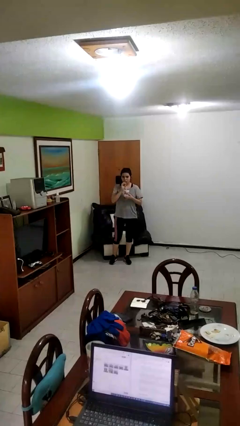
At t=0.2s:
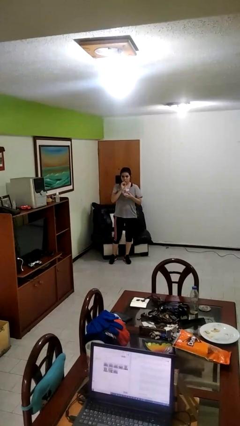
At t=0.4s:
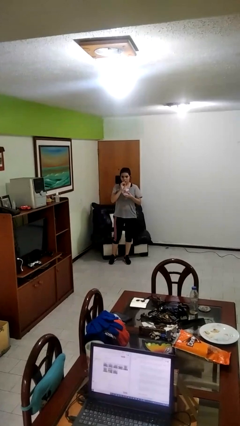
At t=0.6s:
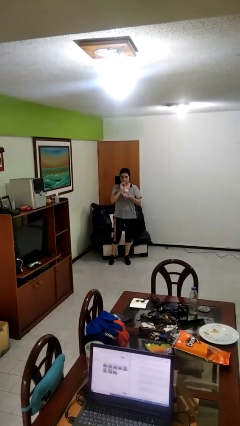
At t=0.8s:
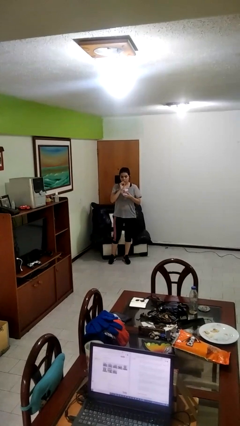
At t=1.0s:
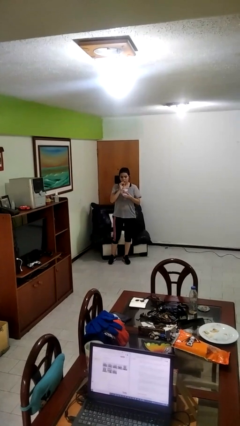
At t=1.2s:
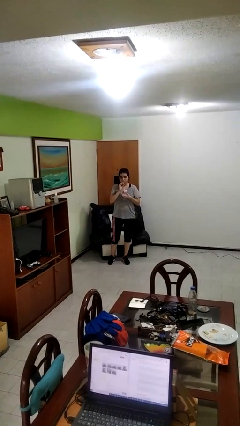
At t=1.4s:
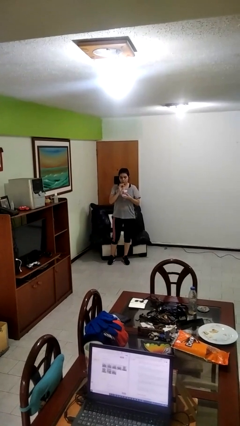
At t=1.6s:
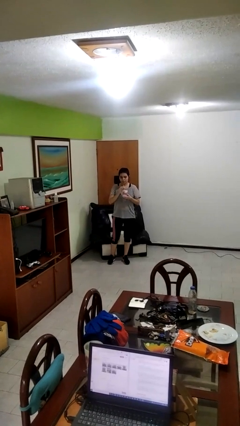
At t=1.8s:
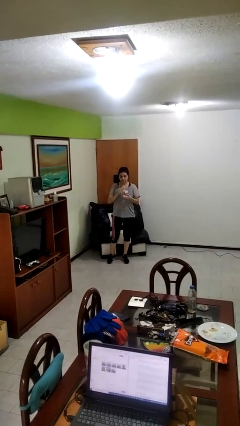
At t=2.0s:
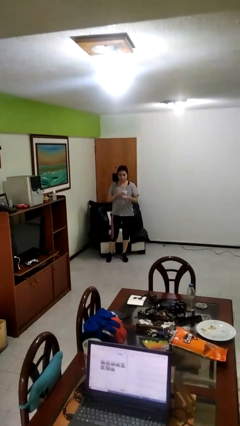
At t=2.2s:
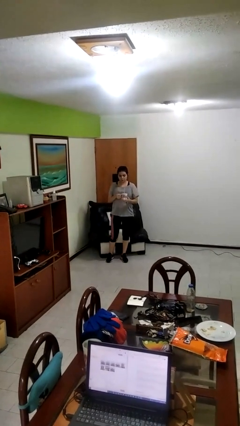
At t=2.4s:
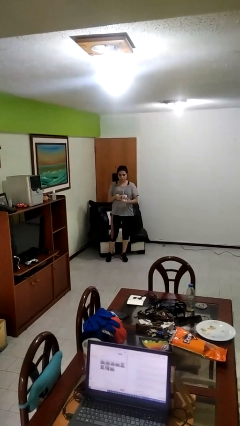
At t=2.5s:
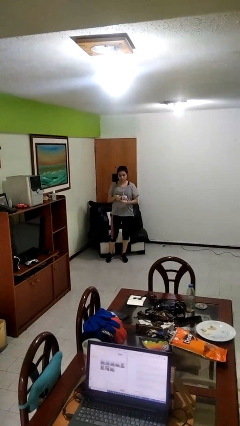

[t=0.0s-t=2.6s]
person drinks from straw

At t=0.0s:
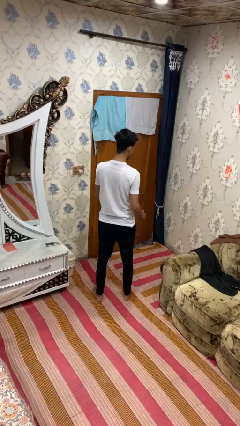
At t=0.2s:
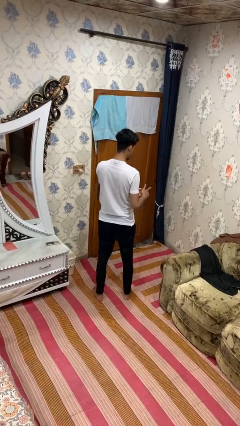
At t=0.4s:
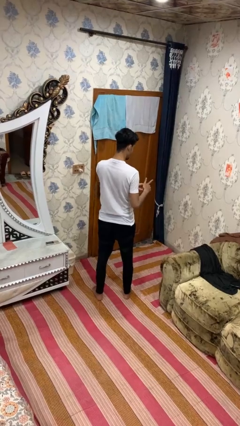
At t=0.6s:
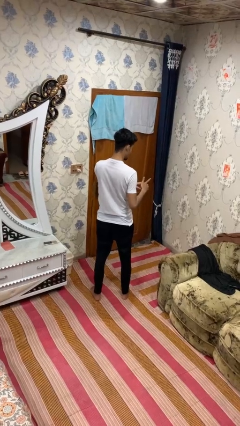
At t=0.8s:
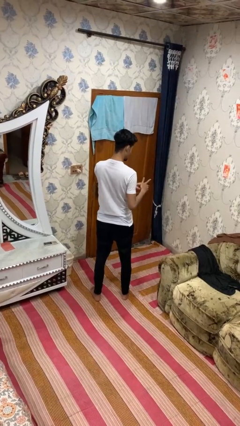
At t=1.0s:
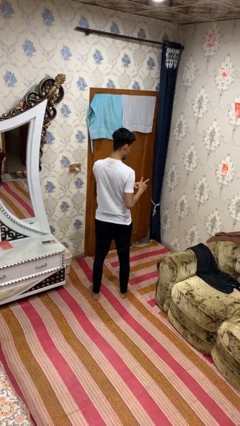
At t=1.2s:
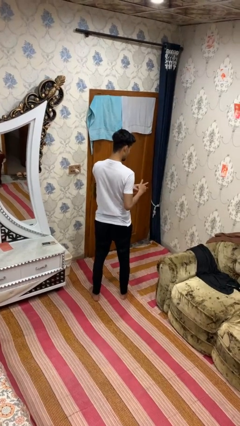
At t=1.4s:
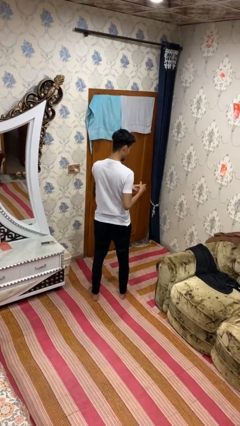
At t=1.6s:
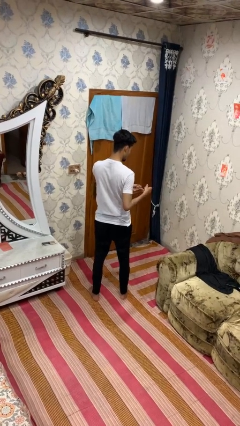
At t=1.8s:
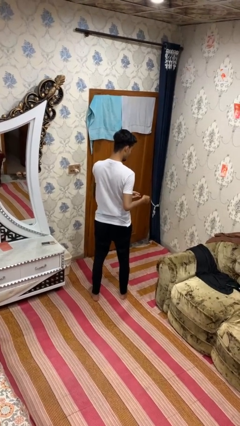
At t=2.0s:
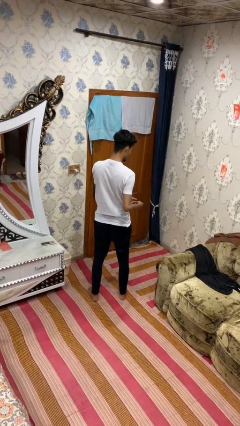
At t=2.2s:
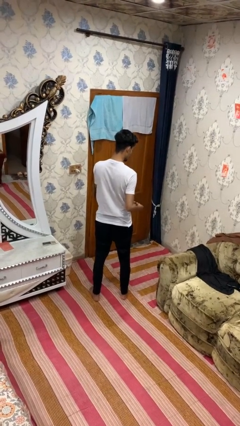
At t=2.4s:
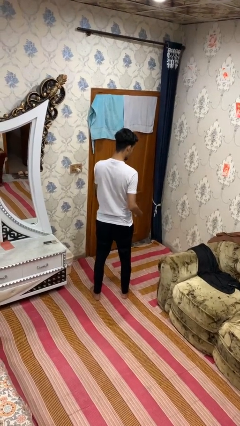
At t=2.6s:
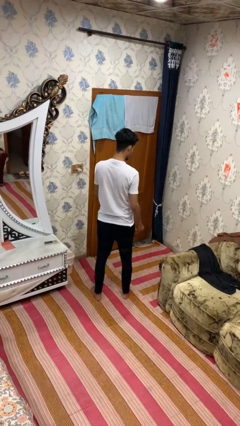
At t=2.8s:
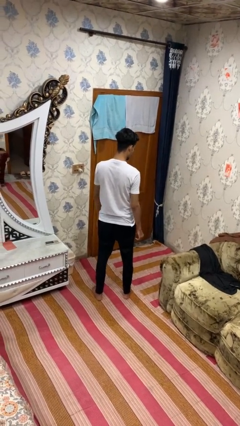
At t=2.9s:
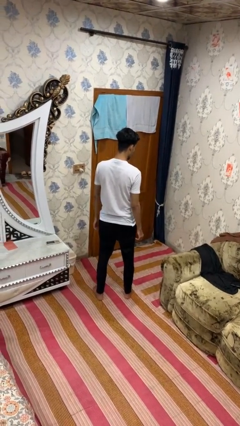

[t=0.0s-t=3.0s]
person takes off ring

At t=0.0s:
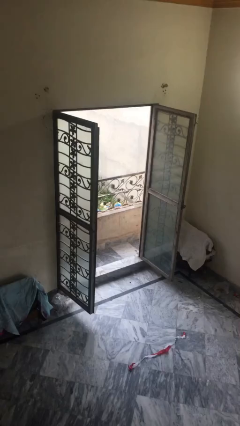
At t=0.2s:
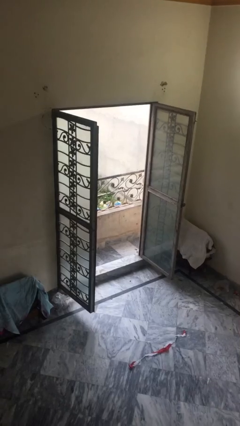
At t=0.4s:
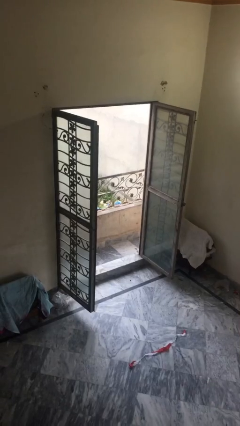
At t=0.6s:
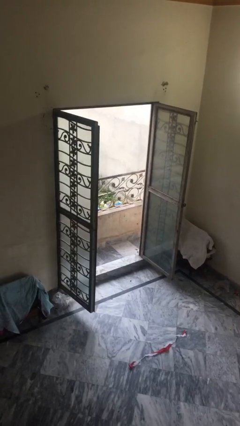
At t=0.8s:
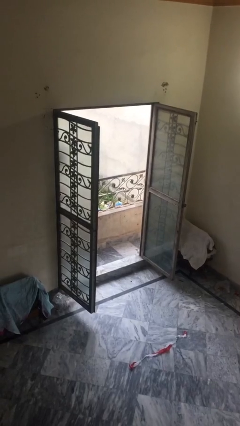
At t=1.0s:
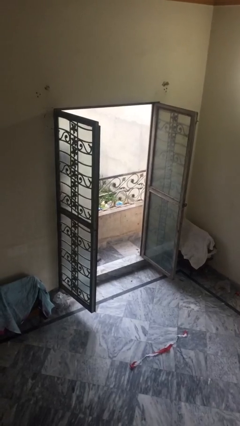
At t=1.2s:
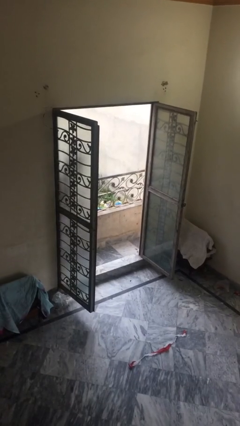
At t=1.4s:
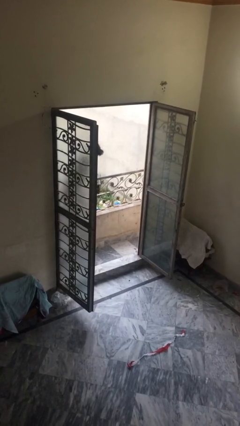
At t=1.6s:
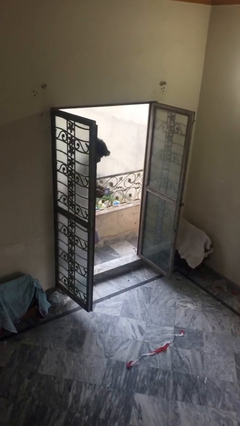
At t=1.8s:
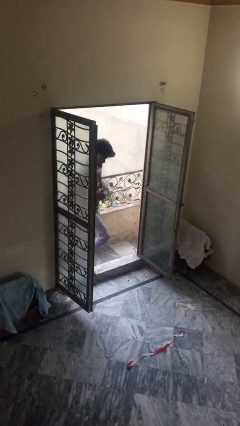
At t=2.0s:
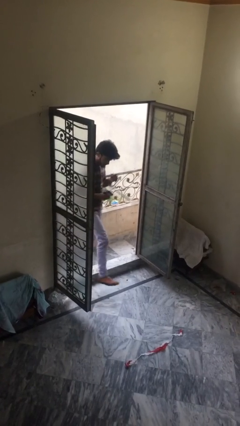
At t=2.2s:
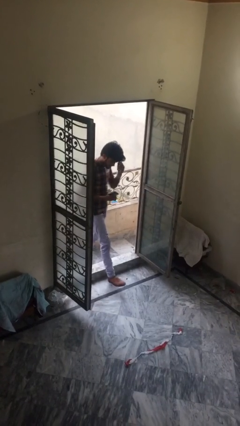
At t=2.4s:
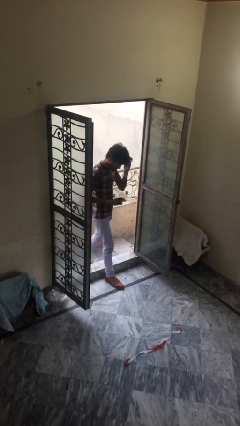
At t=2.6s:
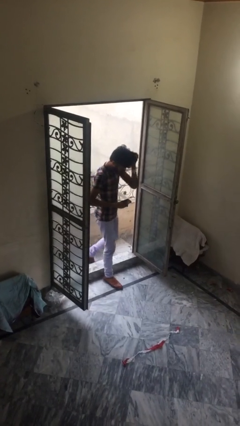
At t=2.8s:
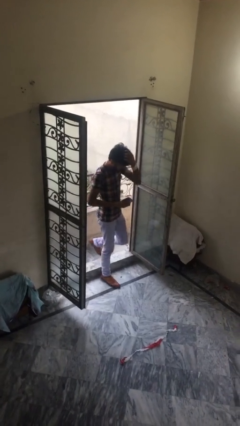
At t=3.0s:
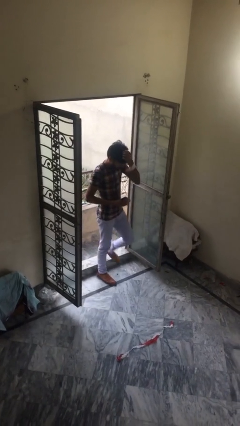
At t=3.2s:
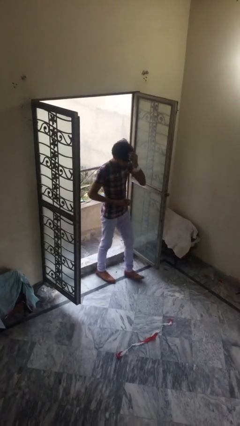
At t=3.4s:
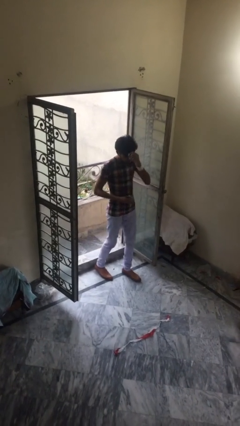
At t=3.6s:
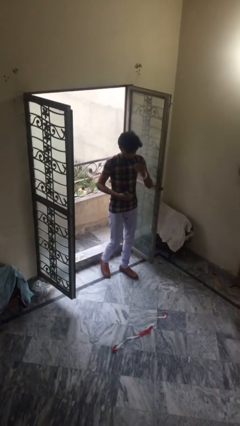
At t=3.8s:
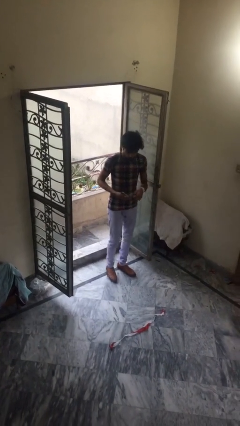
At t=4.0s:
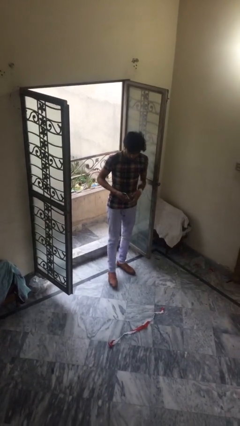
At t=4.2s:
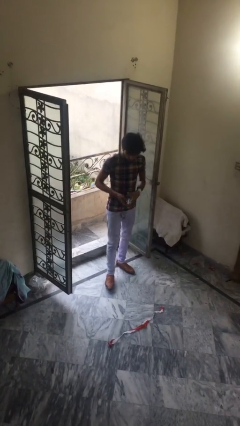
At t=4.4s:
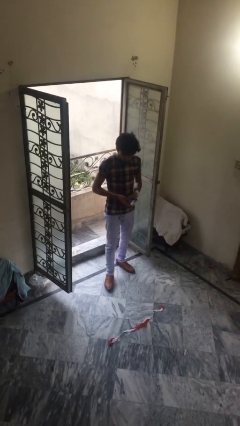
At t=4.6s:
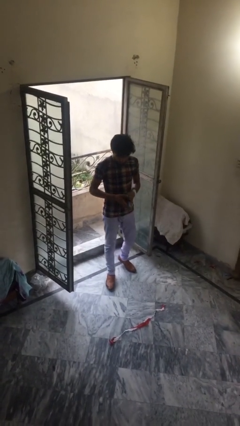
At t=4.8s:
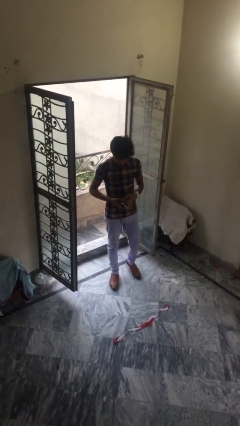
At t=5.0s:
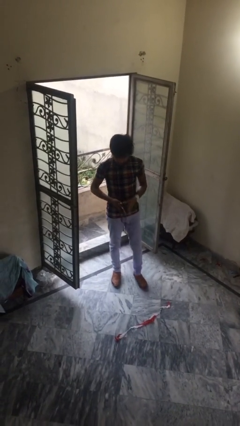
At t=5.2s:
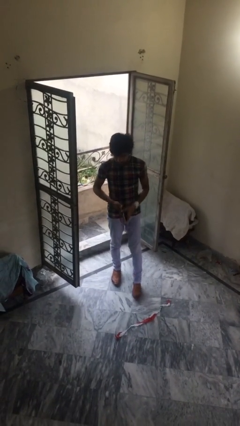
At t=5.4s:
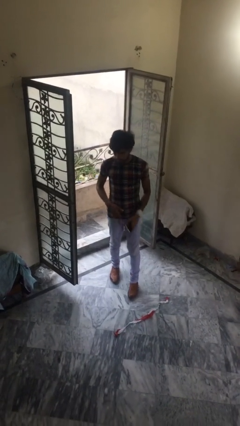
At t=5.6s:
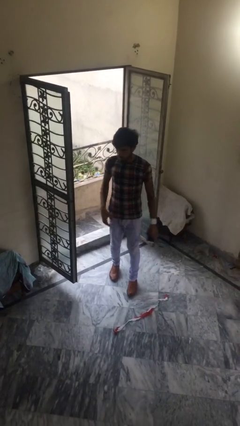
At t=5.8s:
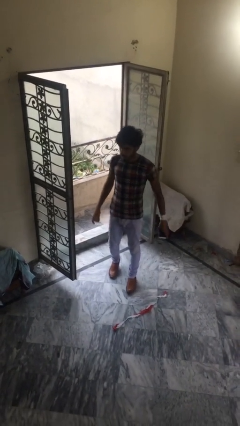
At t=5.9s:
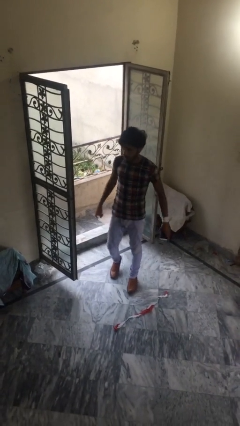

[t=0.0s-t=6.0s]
person enters scene through structure

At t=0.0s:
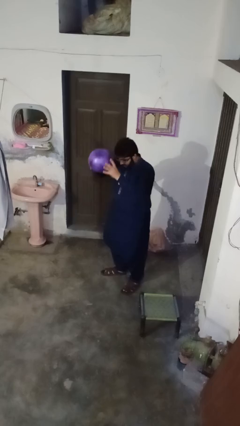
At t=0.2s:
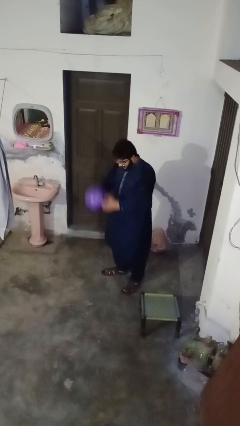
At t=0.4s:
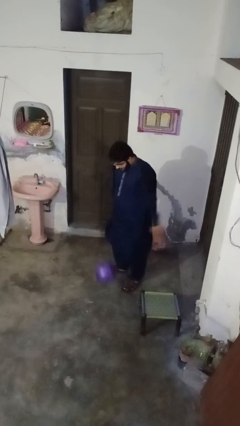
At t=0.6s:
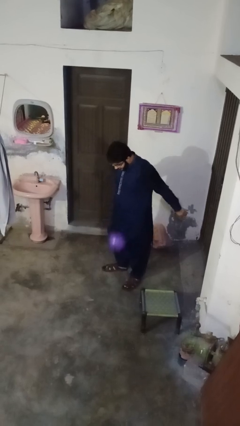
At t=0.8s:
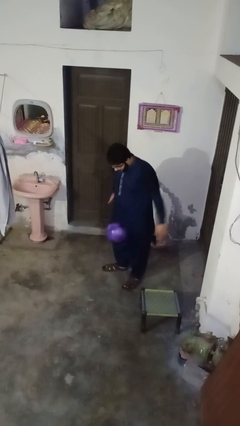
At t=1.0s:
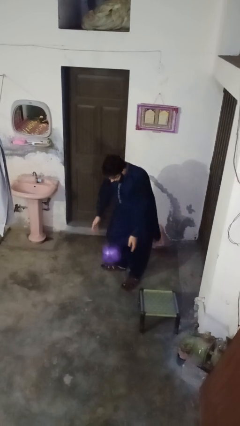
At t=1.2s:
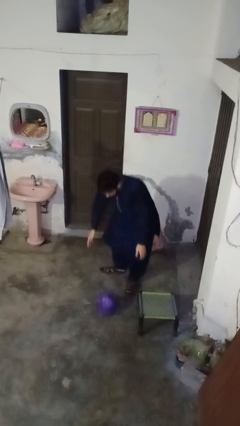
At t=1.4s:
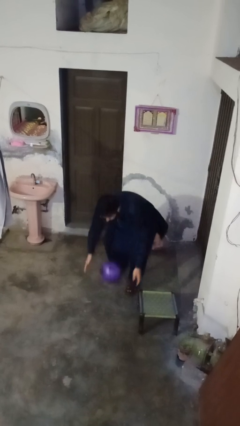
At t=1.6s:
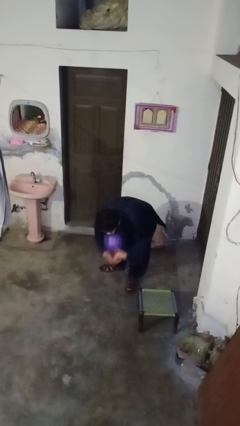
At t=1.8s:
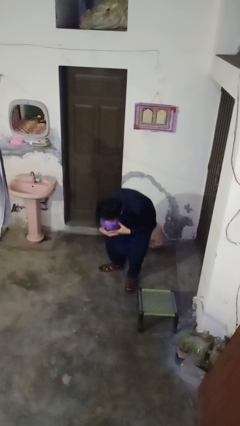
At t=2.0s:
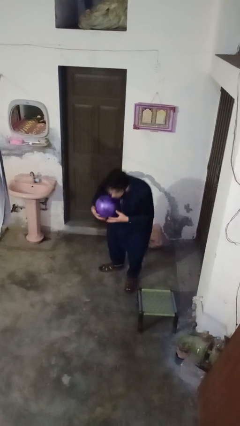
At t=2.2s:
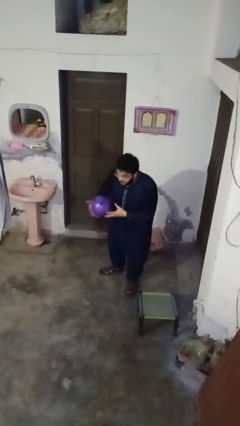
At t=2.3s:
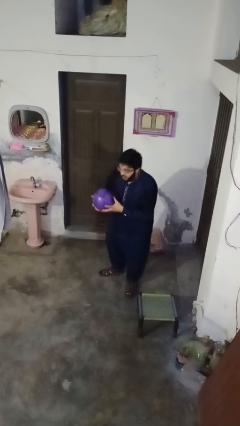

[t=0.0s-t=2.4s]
person bounces ball on floor

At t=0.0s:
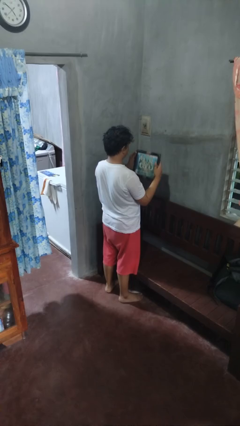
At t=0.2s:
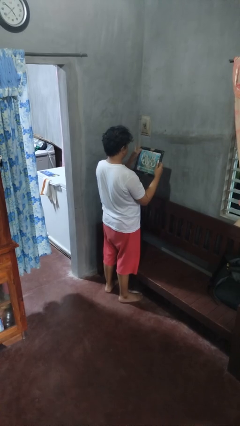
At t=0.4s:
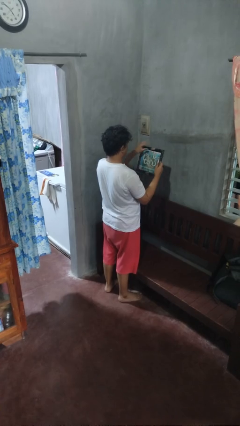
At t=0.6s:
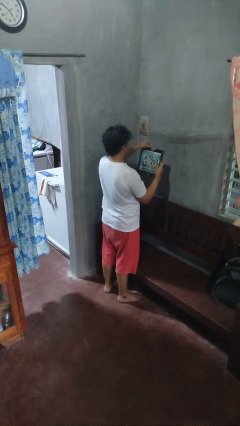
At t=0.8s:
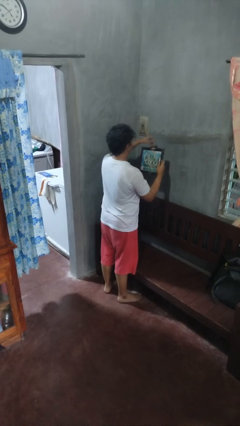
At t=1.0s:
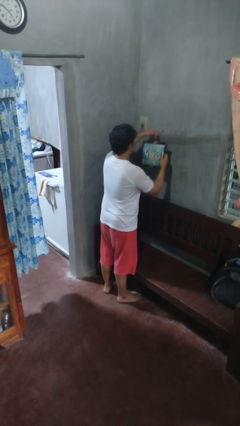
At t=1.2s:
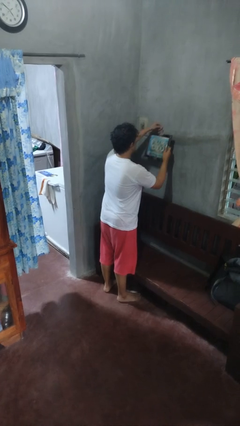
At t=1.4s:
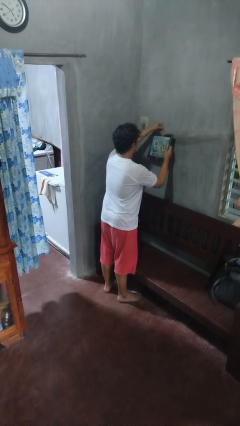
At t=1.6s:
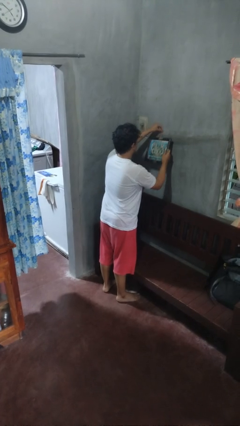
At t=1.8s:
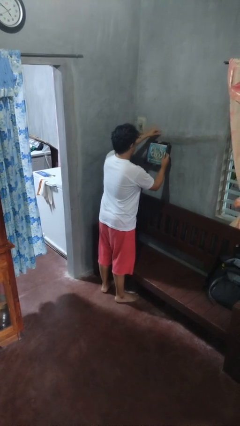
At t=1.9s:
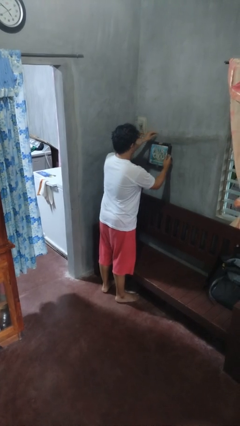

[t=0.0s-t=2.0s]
person puts up picture frame

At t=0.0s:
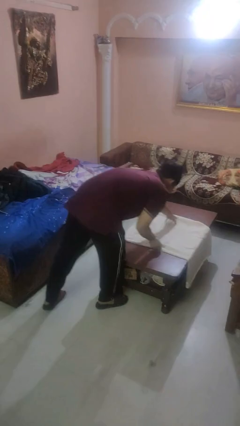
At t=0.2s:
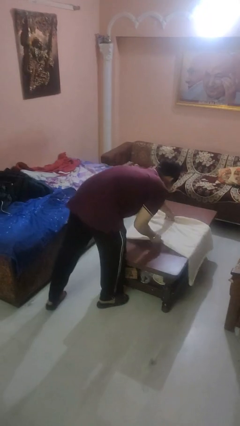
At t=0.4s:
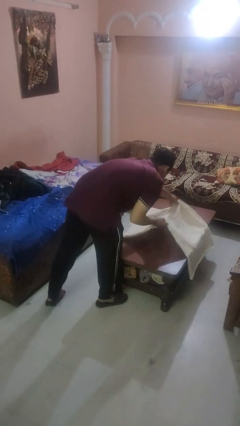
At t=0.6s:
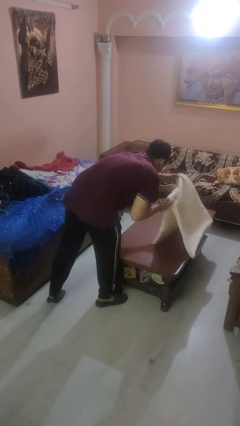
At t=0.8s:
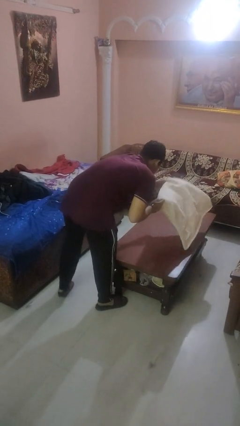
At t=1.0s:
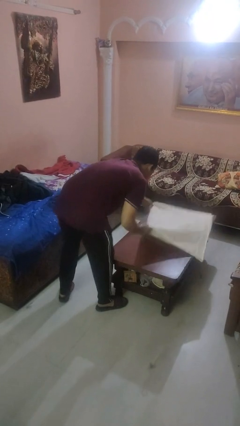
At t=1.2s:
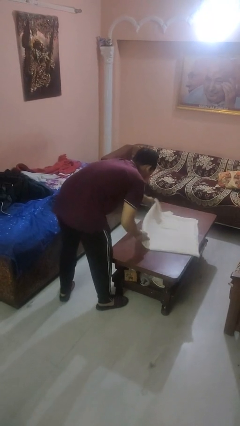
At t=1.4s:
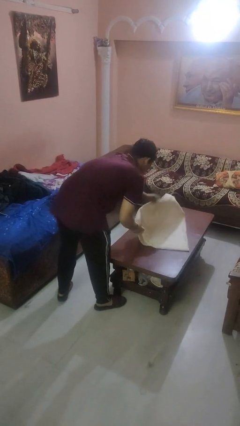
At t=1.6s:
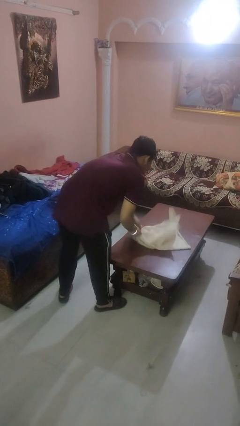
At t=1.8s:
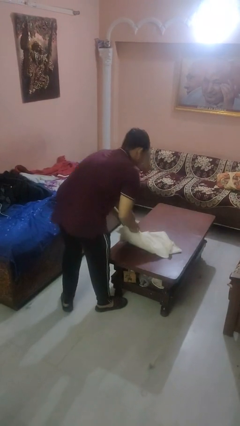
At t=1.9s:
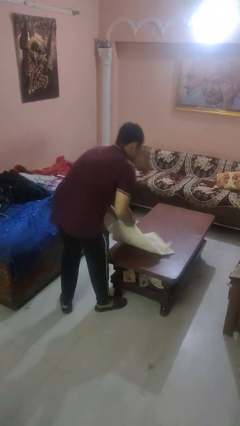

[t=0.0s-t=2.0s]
person folds tablecloth
